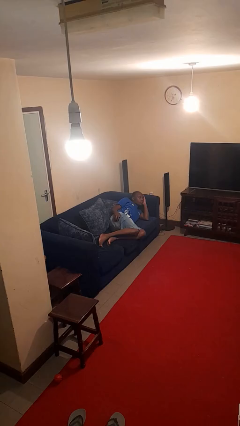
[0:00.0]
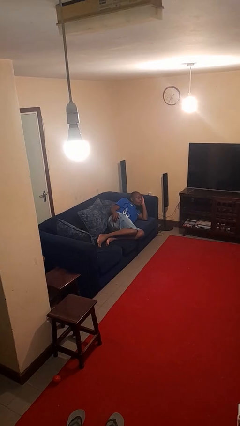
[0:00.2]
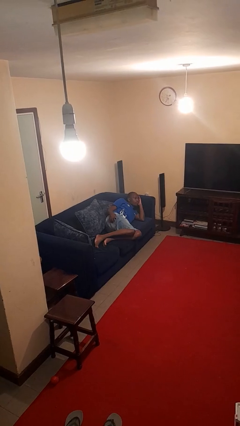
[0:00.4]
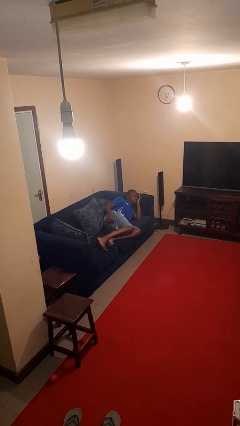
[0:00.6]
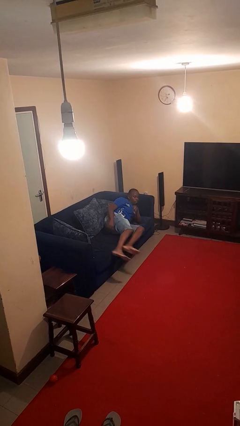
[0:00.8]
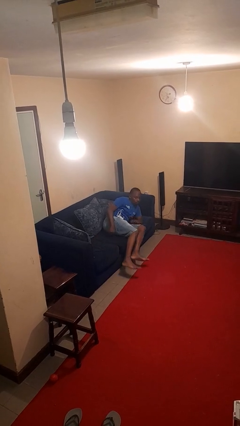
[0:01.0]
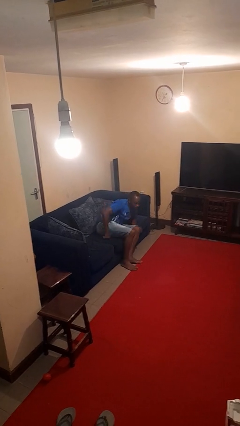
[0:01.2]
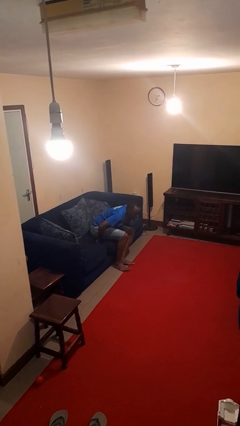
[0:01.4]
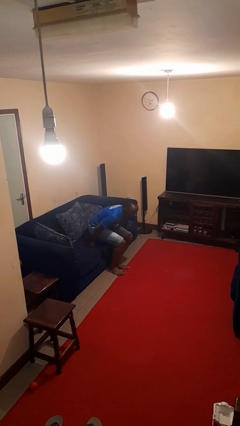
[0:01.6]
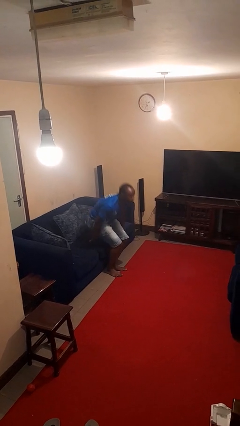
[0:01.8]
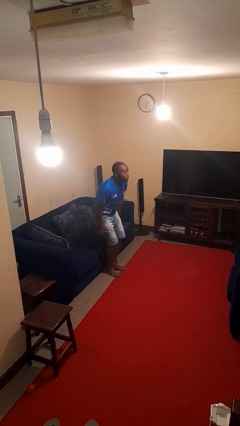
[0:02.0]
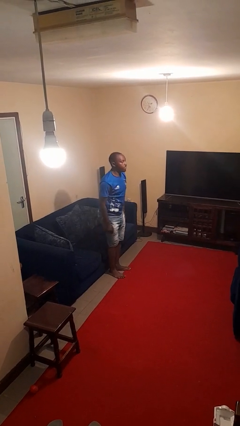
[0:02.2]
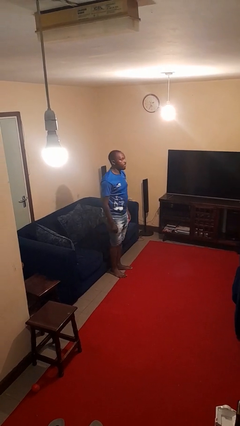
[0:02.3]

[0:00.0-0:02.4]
person stands up

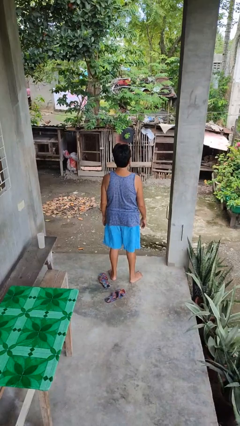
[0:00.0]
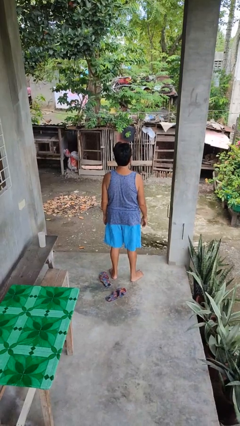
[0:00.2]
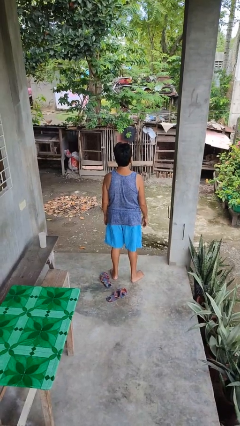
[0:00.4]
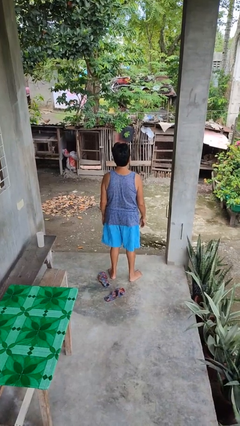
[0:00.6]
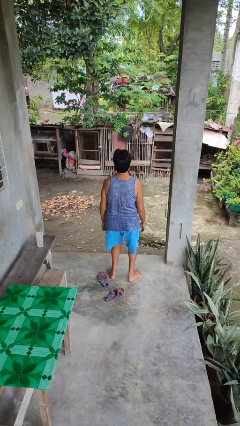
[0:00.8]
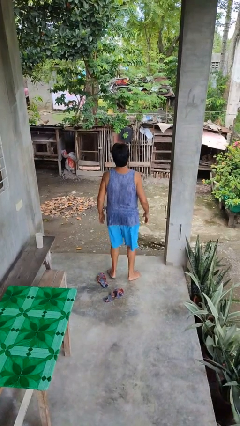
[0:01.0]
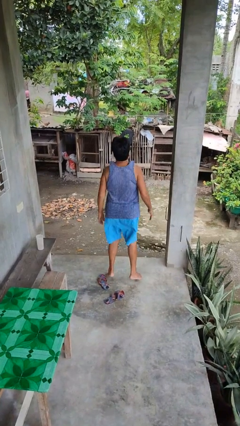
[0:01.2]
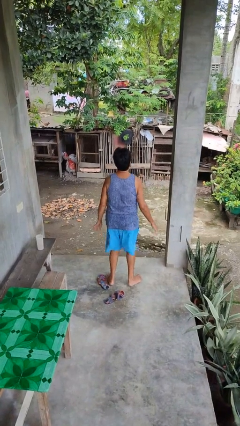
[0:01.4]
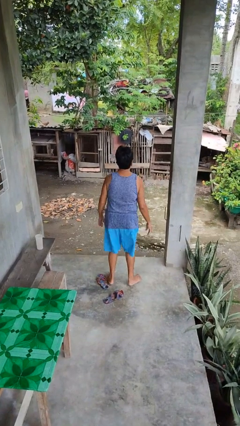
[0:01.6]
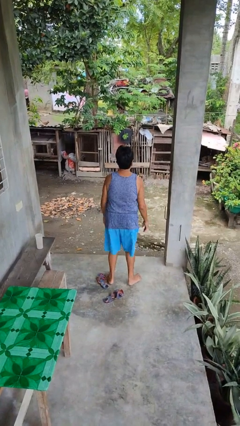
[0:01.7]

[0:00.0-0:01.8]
person jumps

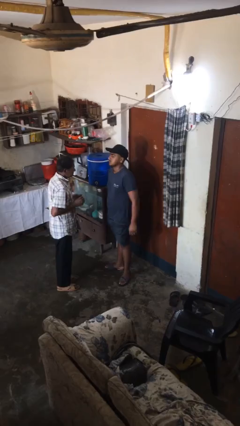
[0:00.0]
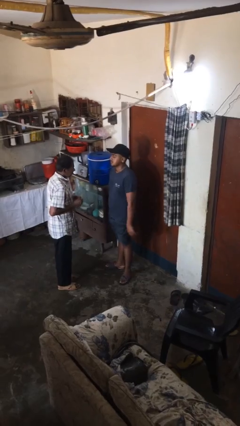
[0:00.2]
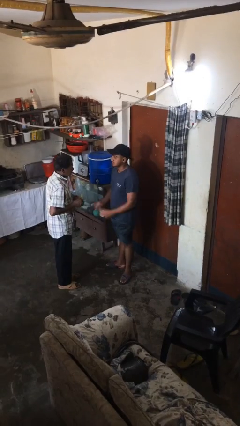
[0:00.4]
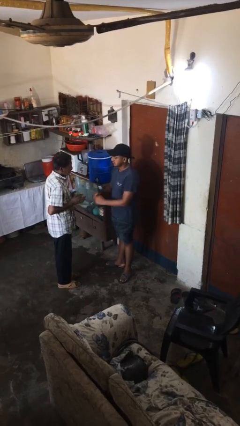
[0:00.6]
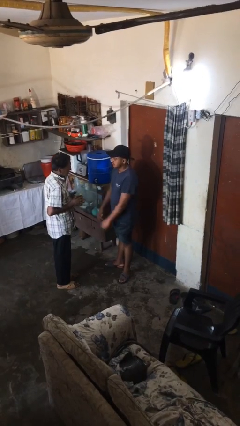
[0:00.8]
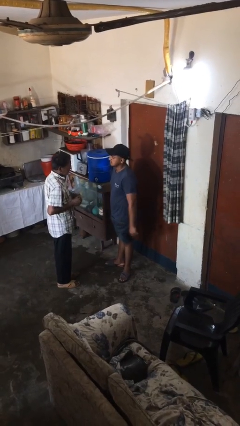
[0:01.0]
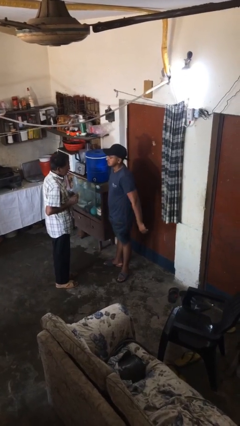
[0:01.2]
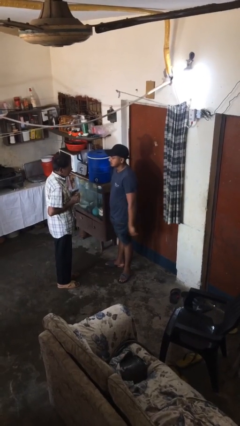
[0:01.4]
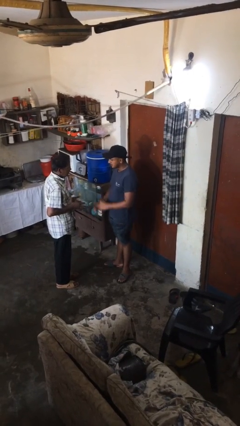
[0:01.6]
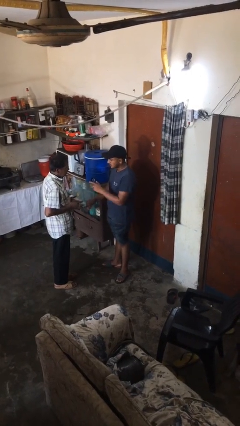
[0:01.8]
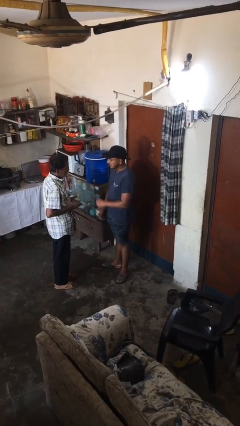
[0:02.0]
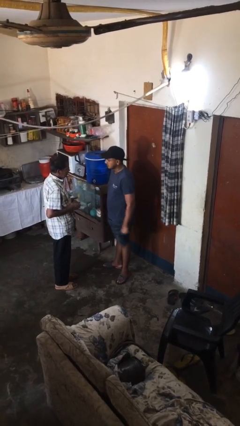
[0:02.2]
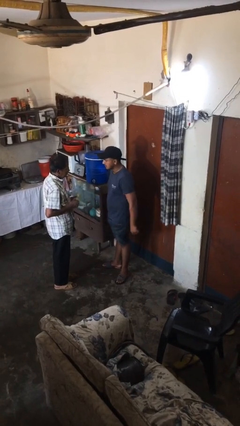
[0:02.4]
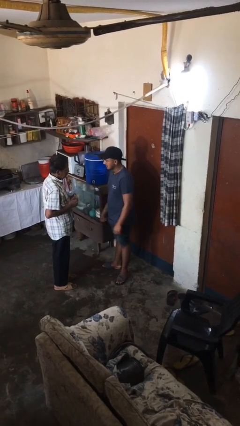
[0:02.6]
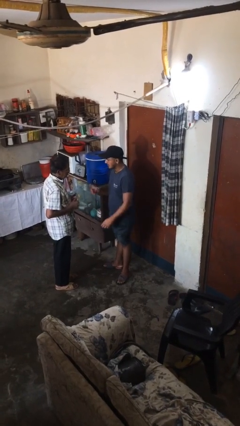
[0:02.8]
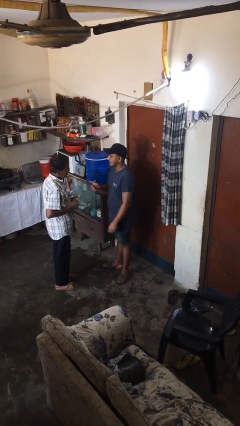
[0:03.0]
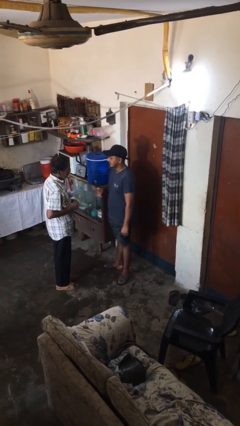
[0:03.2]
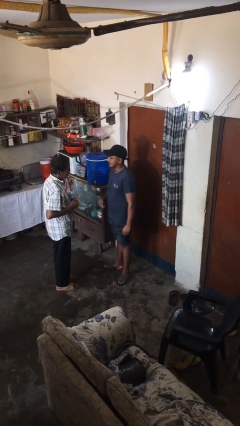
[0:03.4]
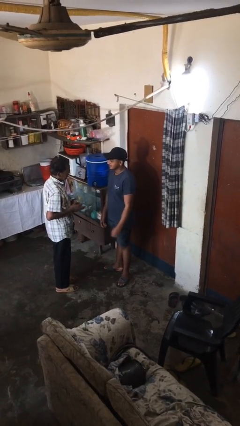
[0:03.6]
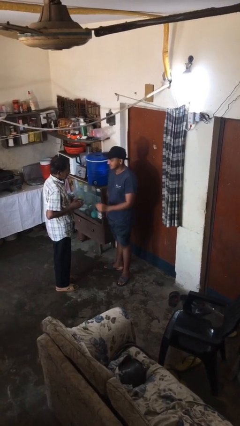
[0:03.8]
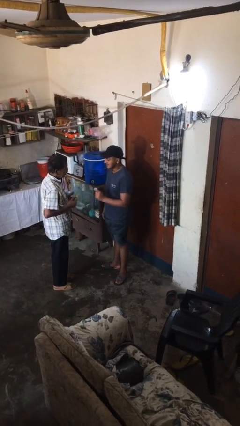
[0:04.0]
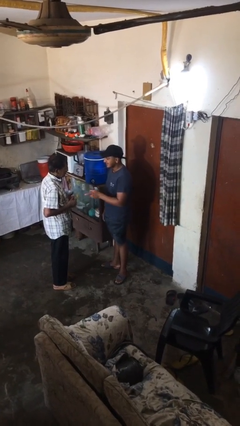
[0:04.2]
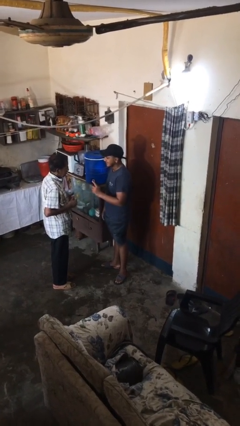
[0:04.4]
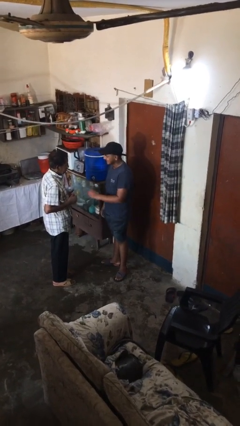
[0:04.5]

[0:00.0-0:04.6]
person talks to person

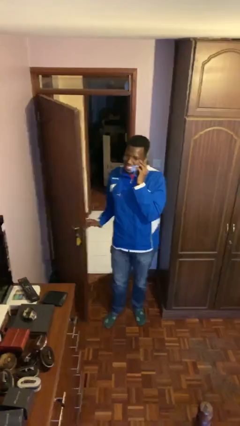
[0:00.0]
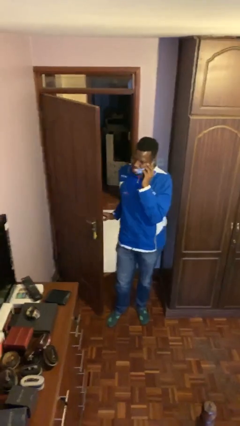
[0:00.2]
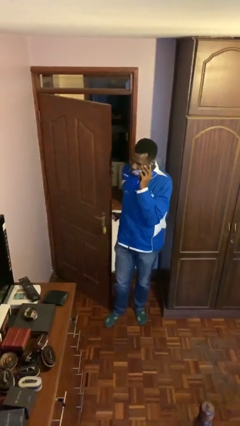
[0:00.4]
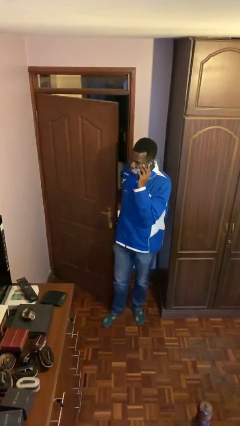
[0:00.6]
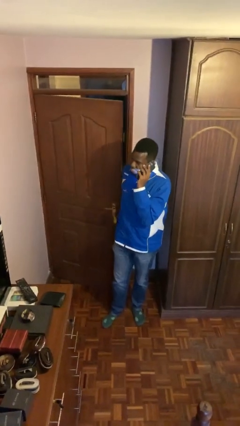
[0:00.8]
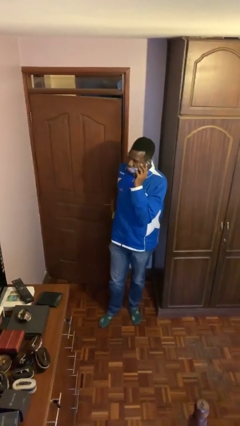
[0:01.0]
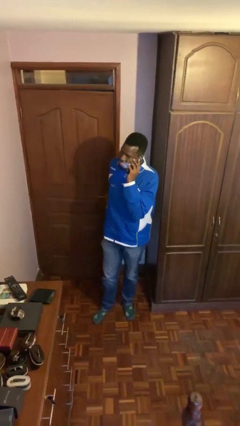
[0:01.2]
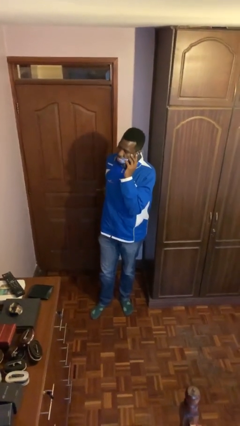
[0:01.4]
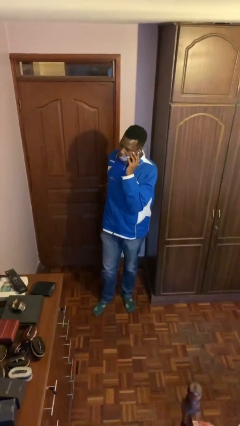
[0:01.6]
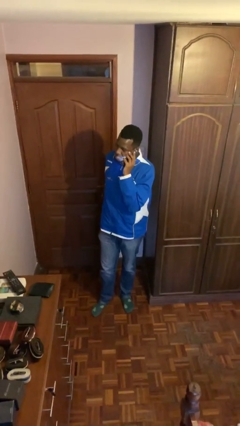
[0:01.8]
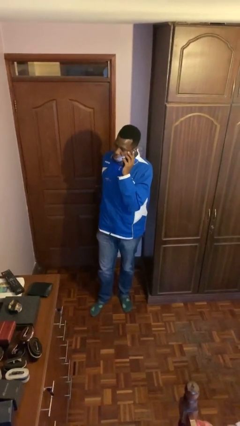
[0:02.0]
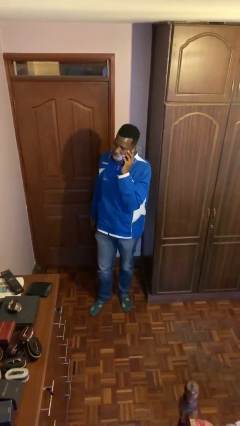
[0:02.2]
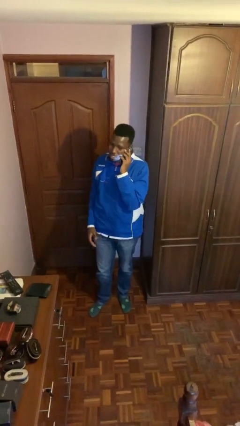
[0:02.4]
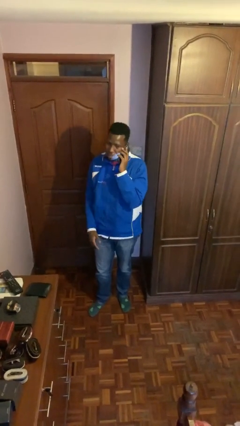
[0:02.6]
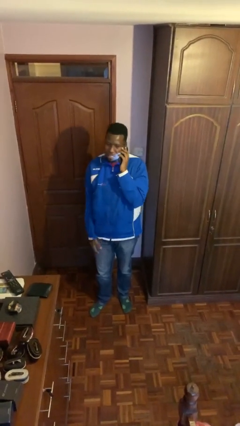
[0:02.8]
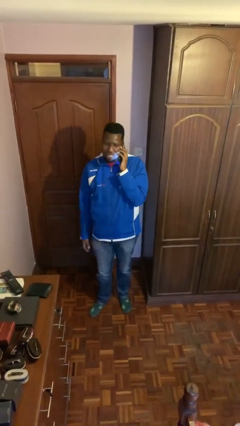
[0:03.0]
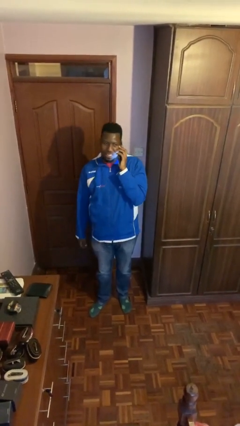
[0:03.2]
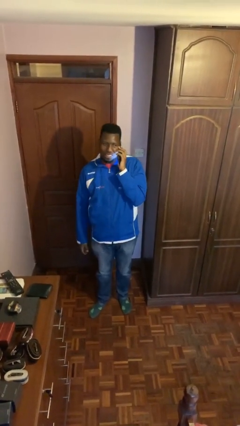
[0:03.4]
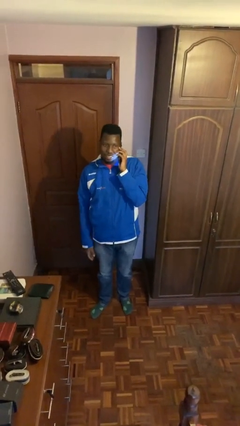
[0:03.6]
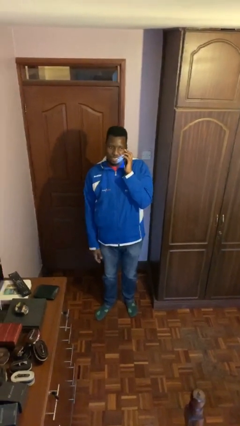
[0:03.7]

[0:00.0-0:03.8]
person closes facility door

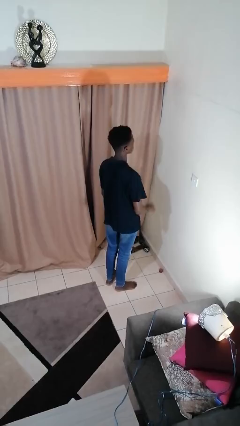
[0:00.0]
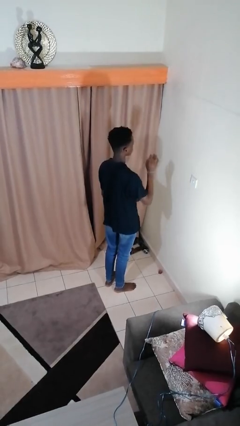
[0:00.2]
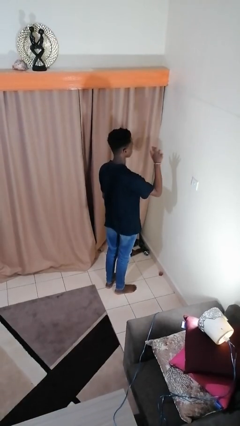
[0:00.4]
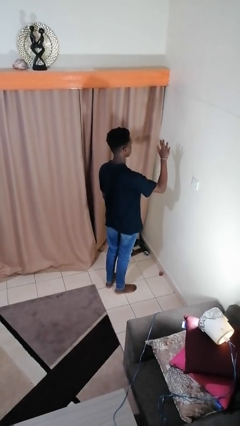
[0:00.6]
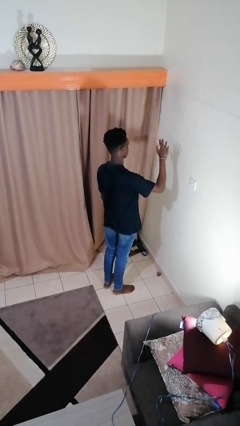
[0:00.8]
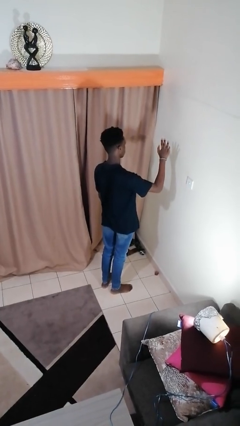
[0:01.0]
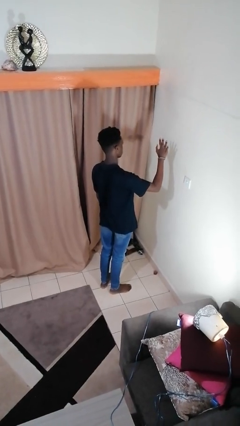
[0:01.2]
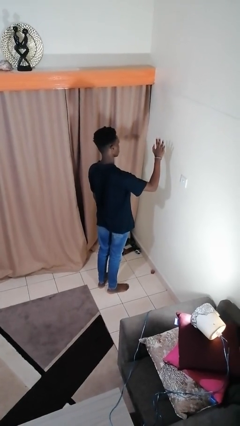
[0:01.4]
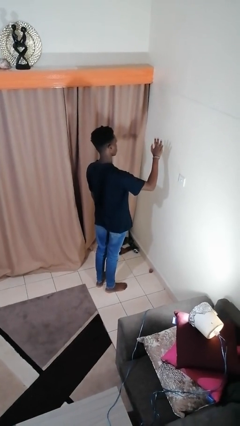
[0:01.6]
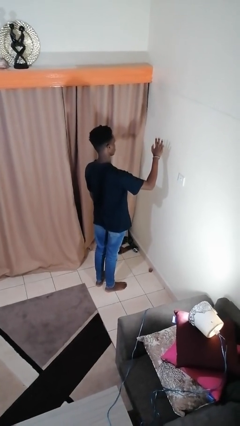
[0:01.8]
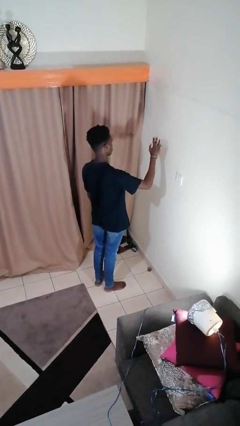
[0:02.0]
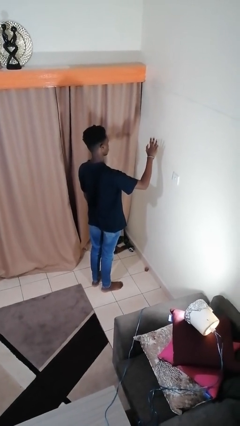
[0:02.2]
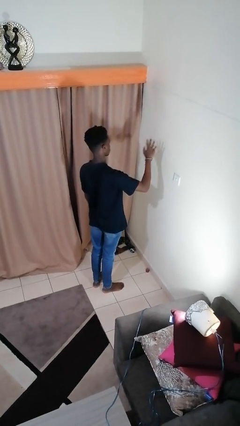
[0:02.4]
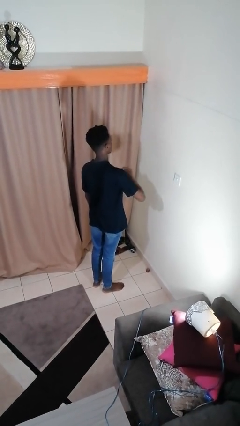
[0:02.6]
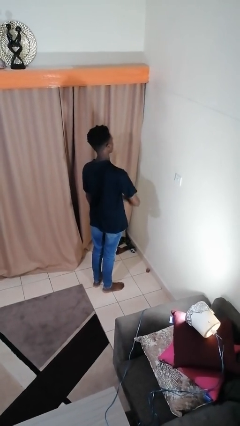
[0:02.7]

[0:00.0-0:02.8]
person gestures number five

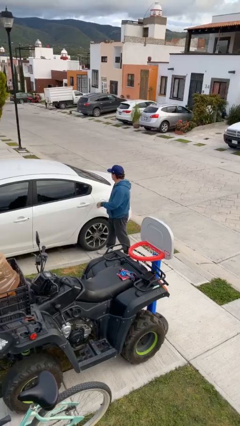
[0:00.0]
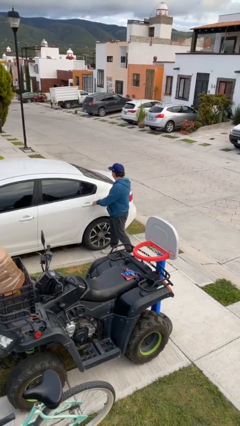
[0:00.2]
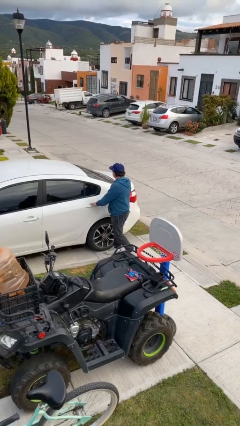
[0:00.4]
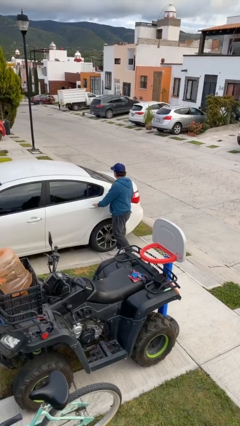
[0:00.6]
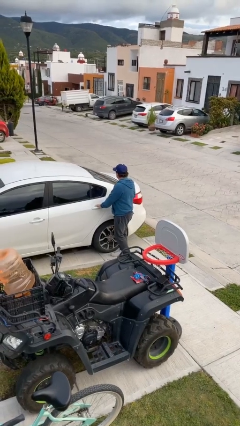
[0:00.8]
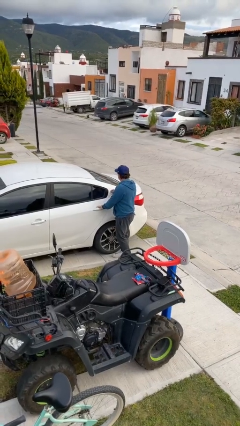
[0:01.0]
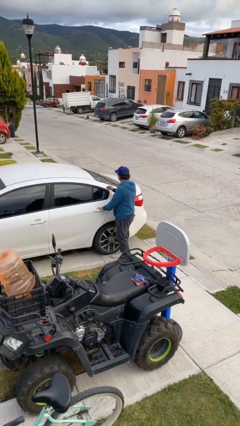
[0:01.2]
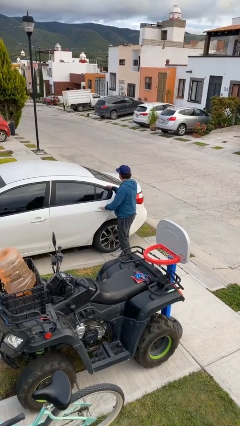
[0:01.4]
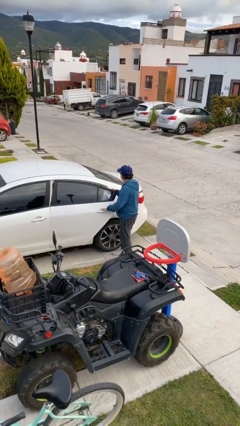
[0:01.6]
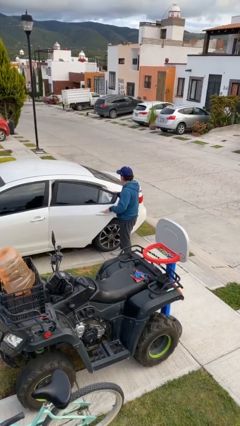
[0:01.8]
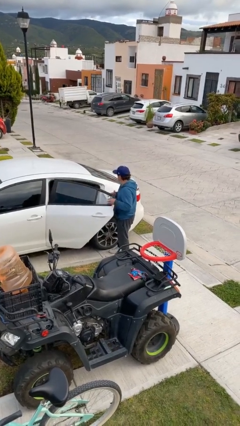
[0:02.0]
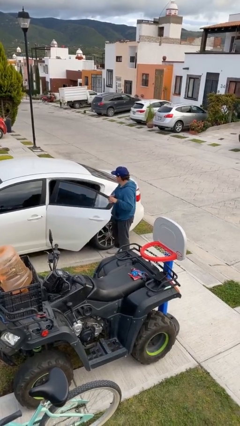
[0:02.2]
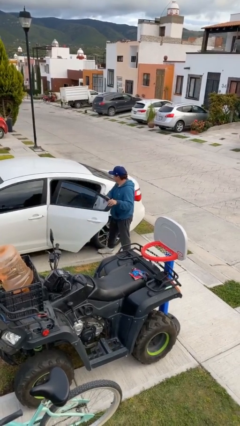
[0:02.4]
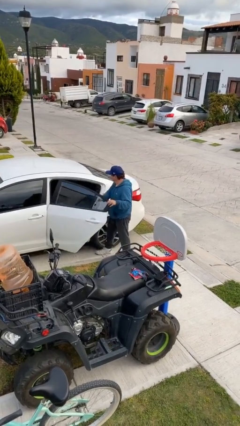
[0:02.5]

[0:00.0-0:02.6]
person opens car door
